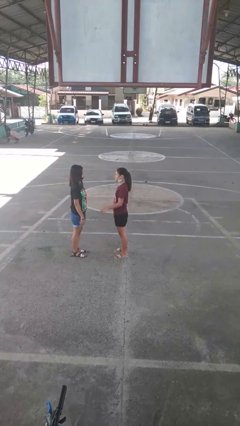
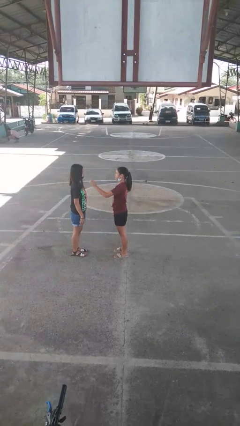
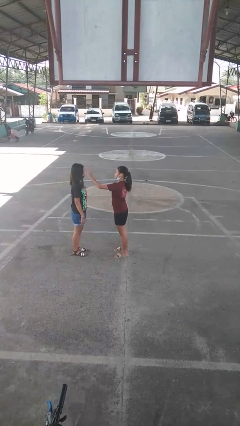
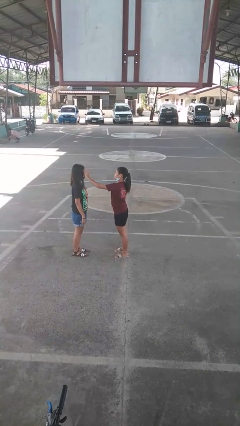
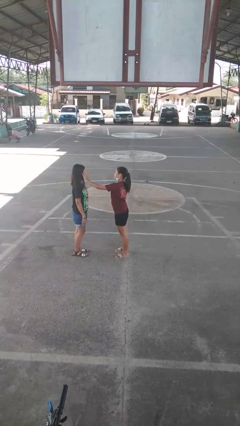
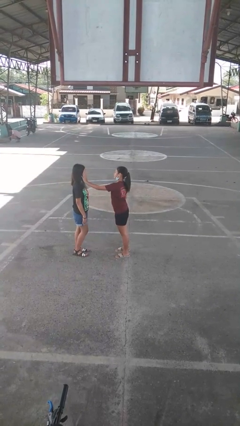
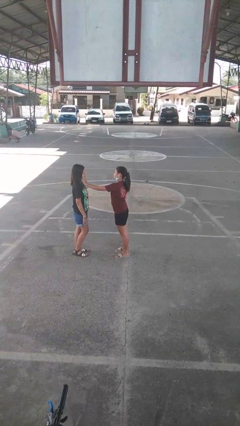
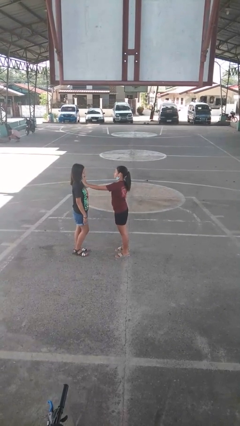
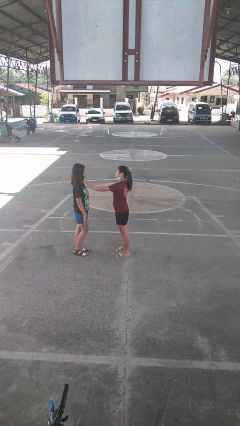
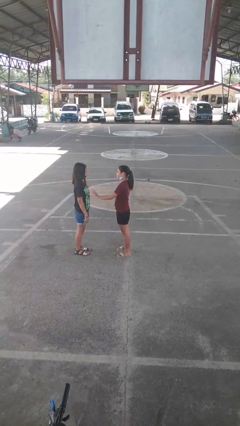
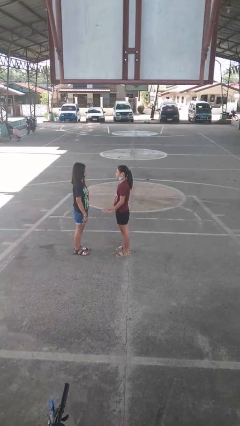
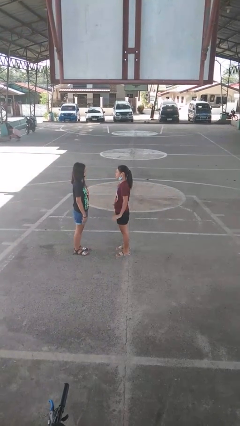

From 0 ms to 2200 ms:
person touches face of person

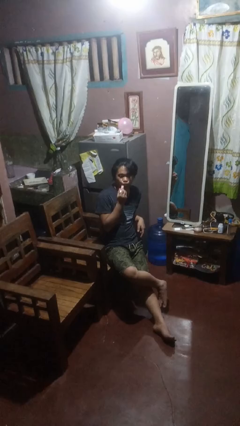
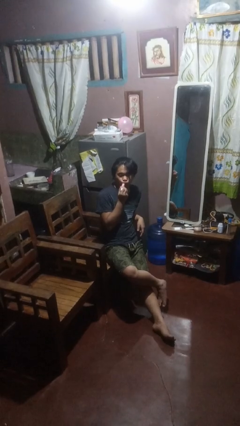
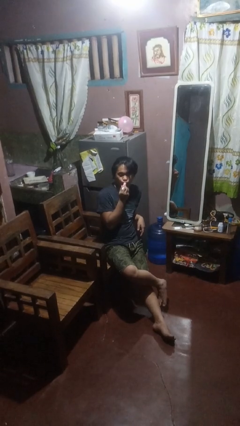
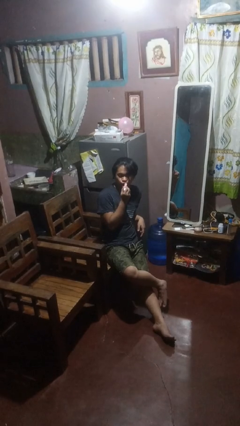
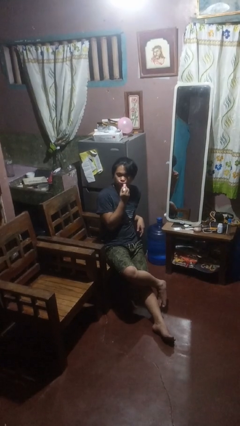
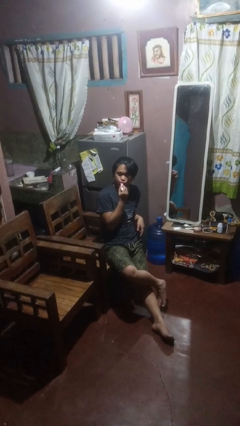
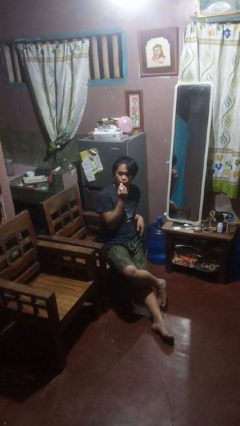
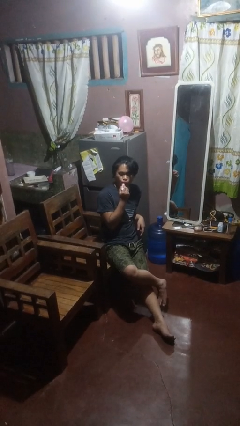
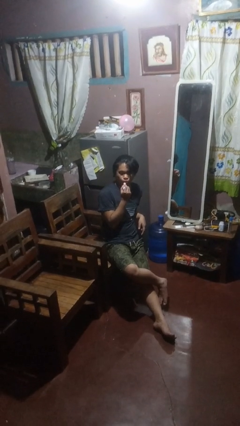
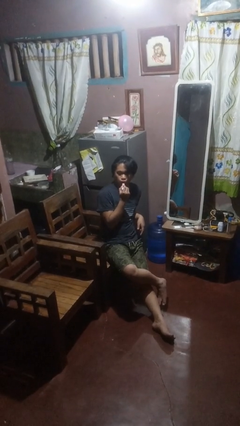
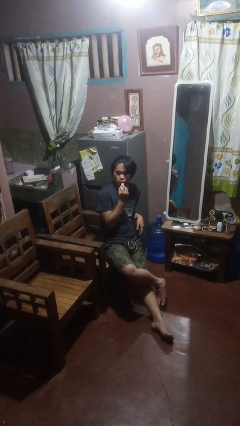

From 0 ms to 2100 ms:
person applies lip makeup

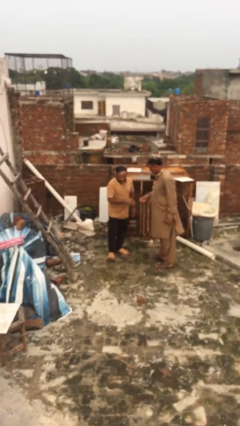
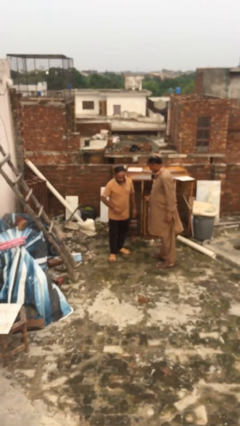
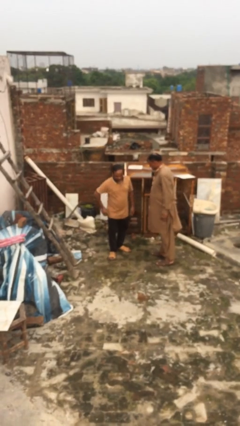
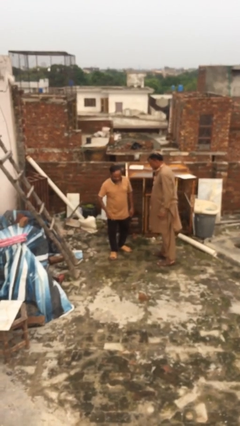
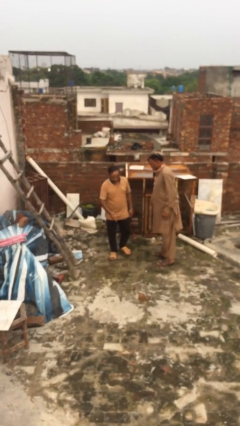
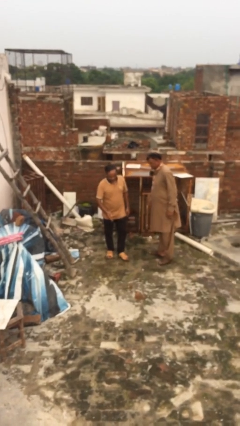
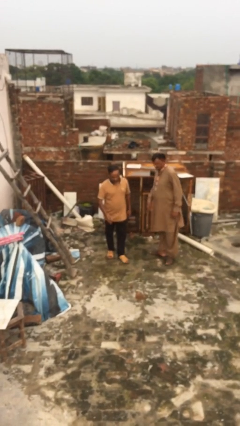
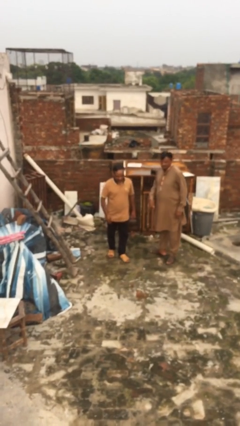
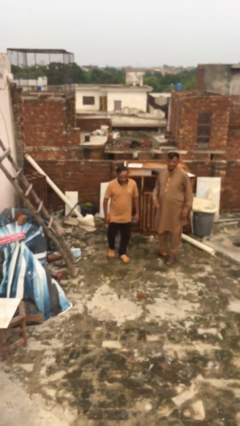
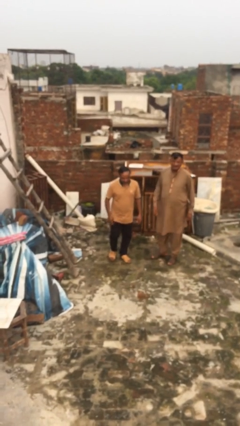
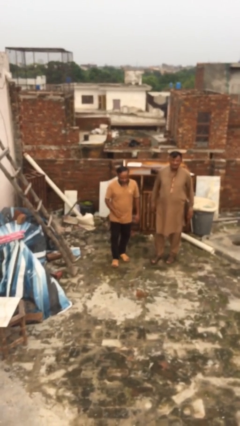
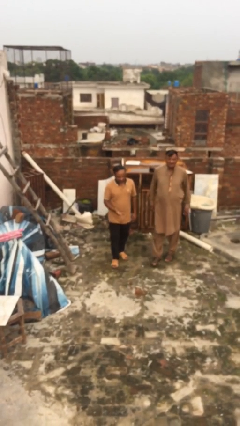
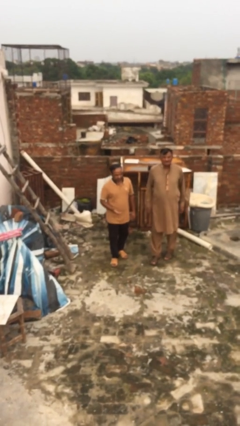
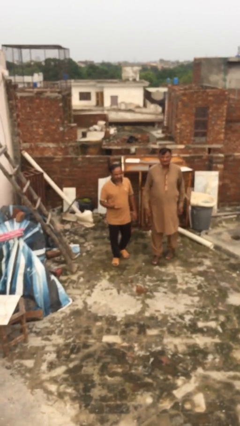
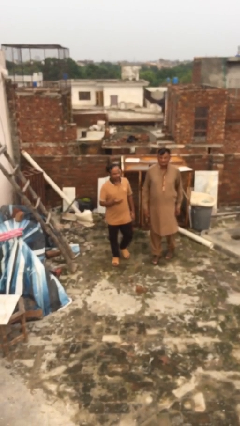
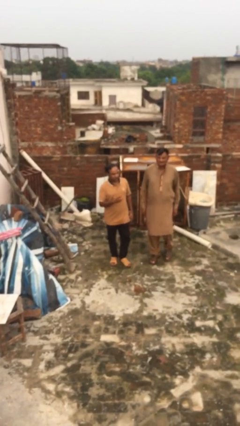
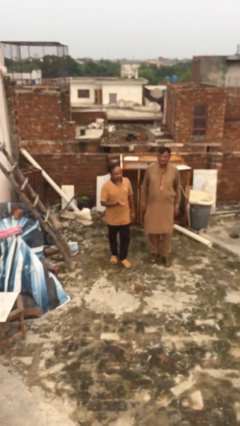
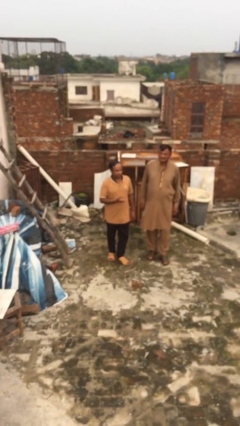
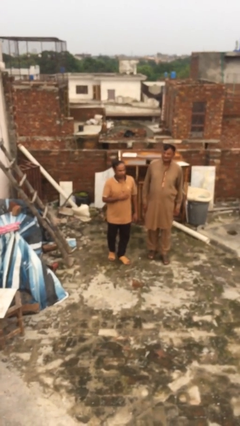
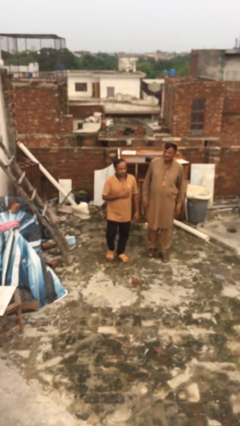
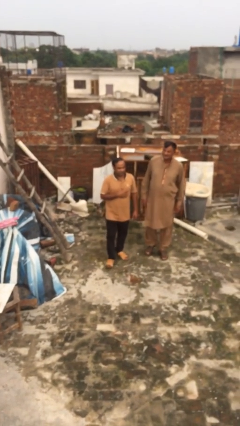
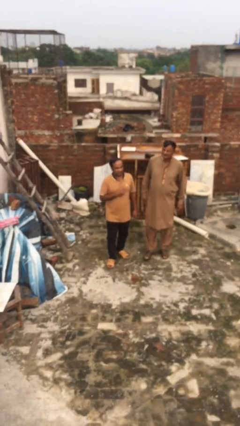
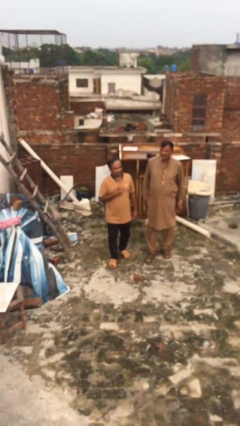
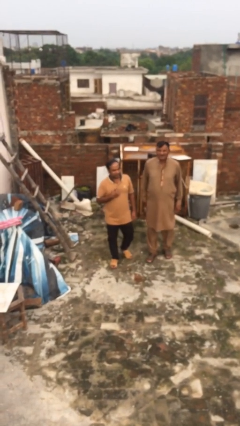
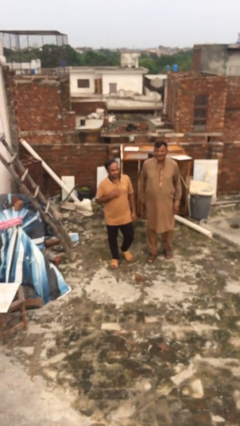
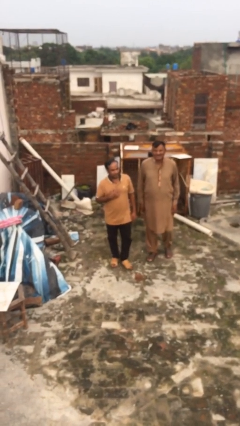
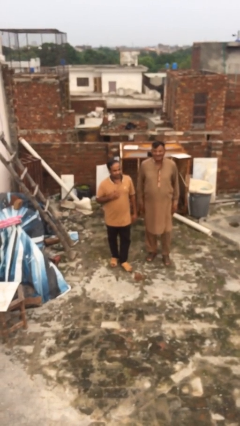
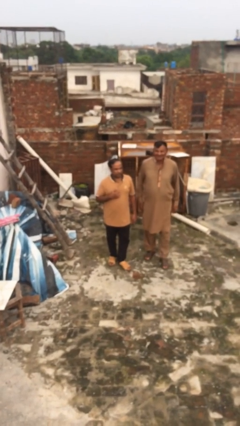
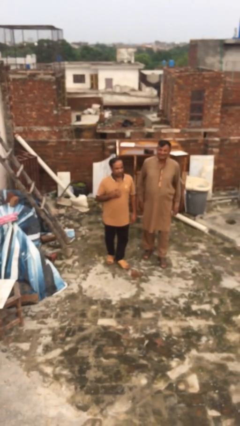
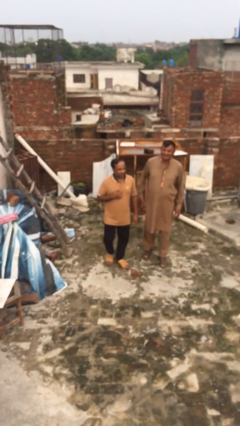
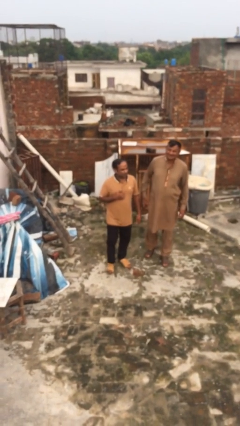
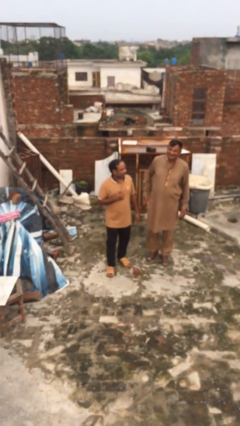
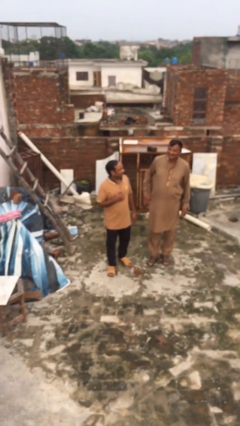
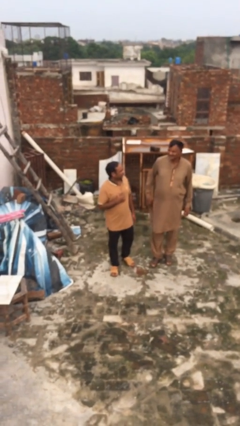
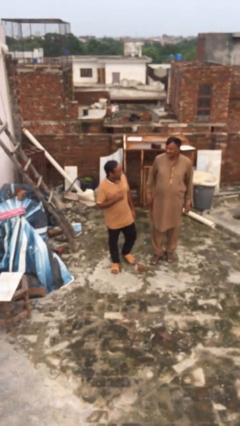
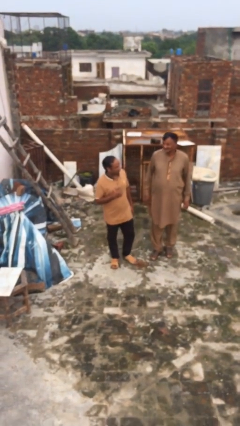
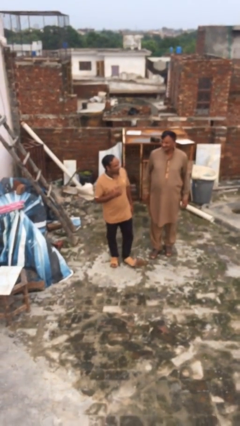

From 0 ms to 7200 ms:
person talks to person

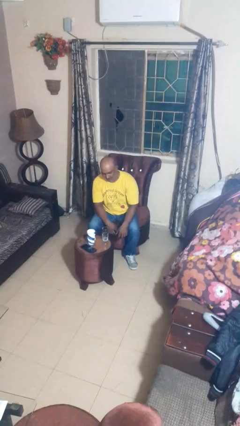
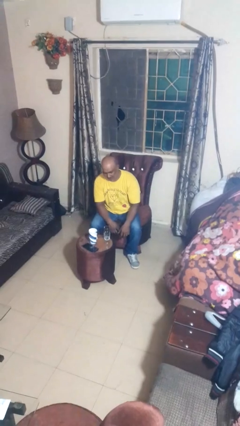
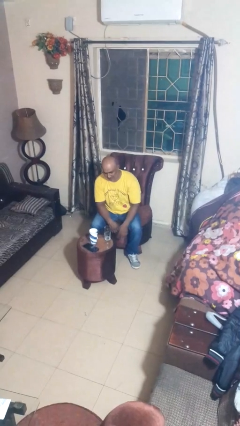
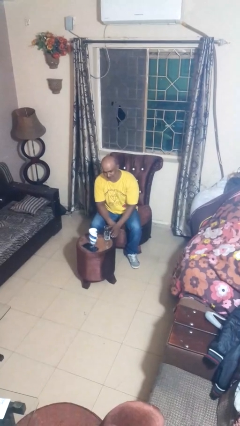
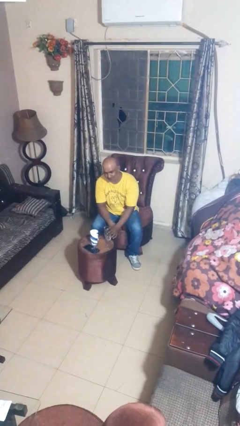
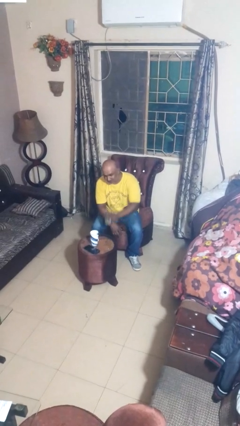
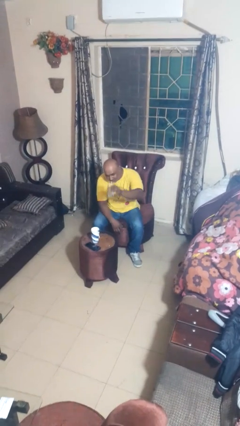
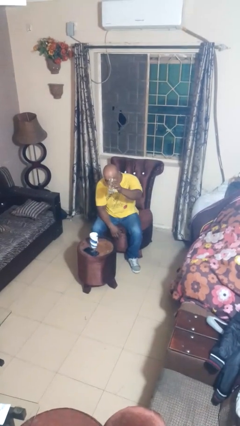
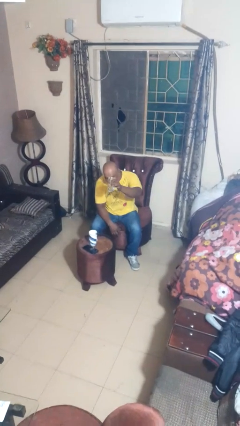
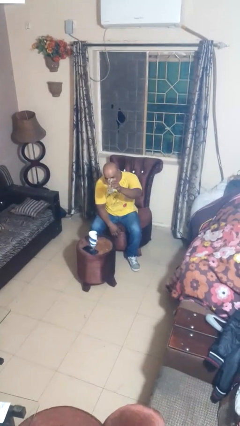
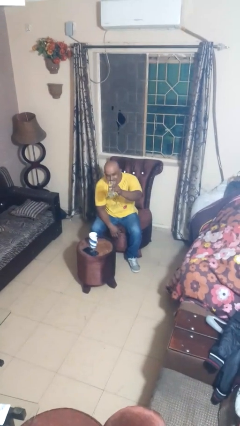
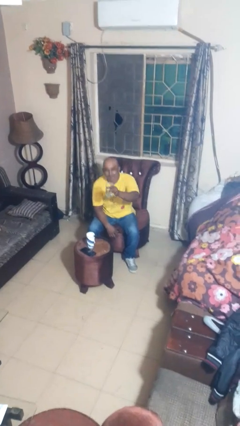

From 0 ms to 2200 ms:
person picks up object from table

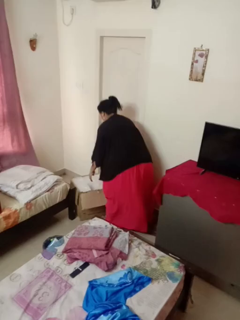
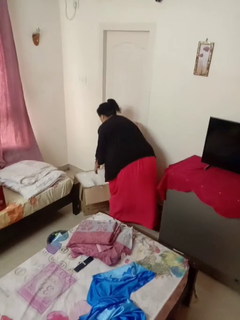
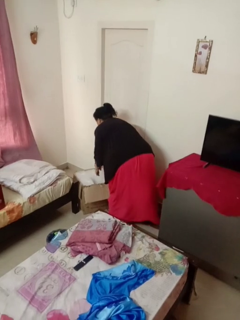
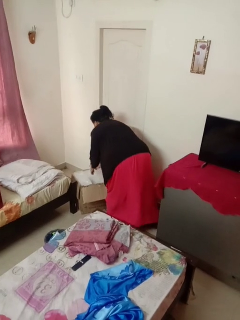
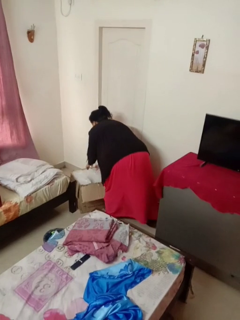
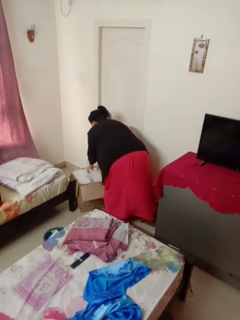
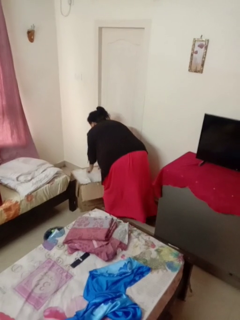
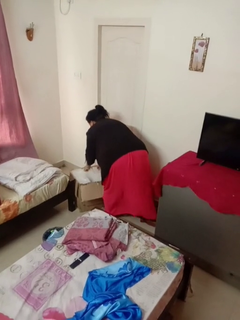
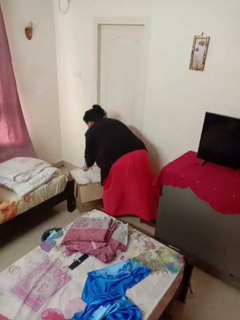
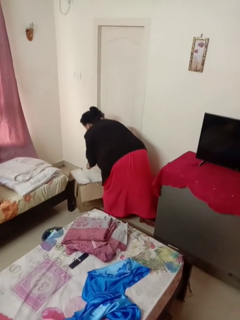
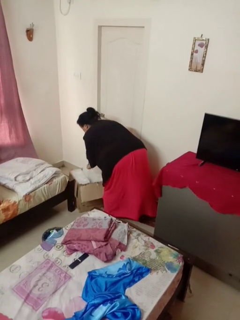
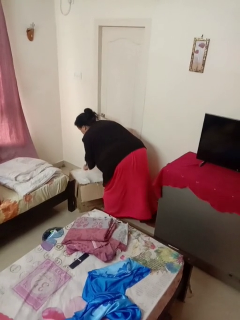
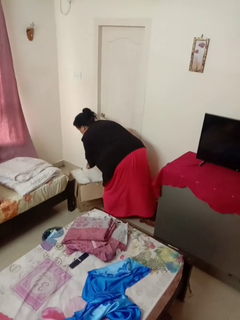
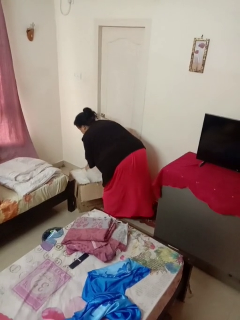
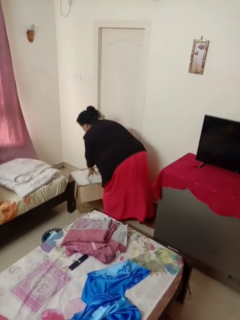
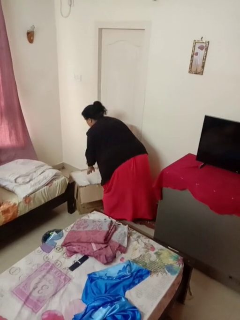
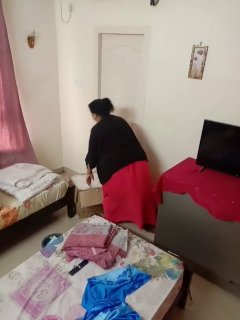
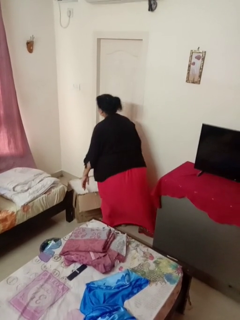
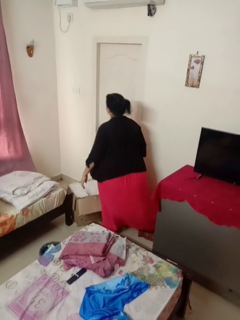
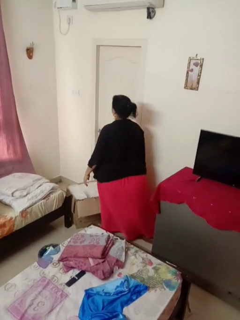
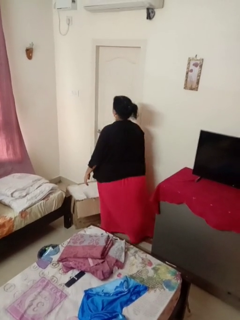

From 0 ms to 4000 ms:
person searches in box

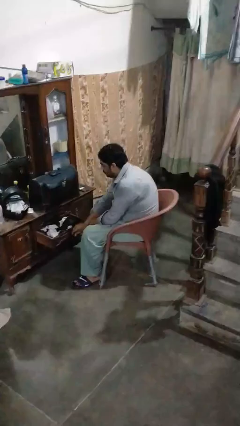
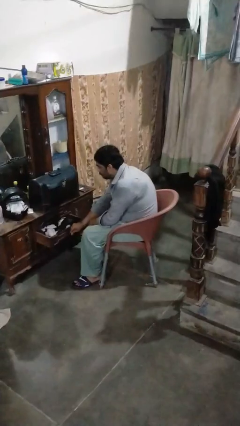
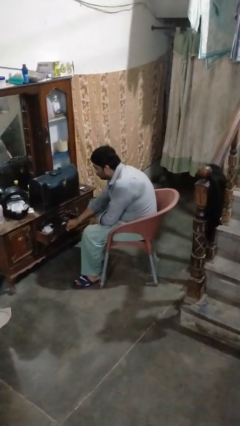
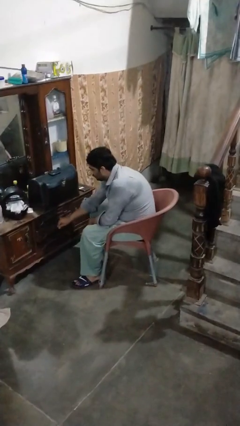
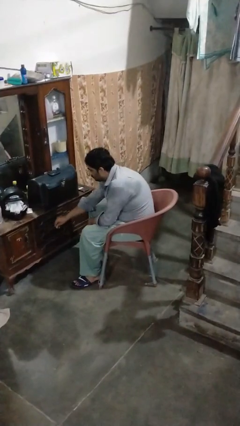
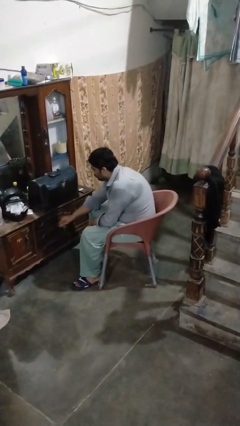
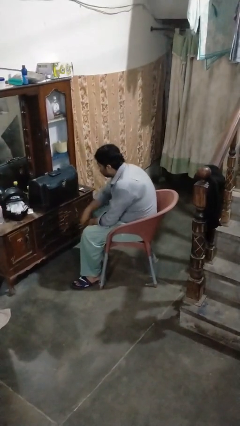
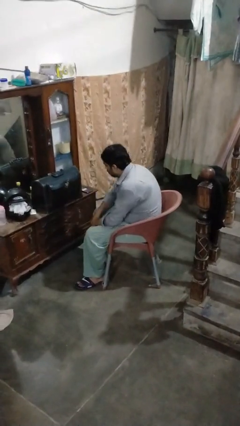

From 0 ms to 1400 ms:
person closes dresser drawer
